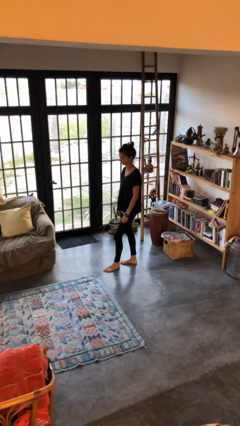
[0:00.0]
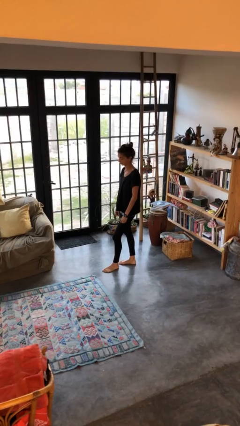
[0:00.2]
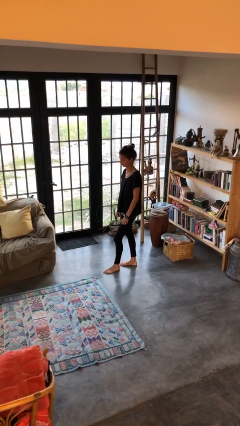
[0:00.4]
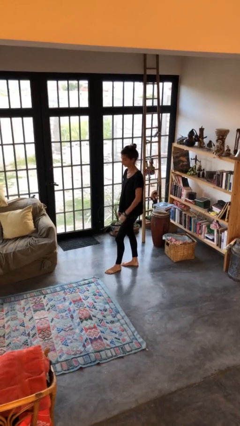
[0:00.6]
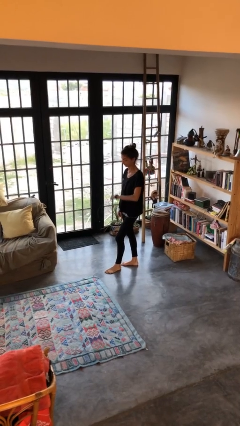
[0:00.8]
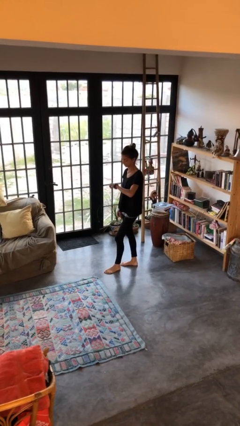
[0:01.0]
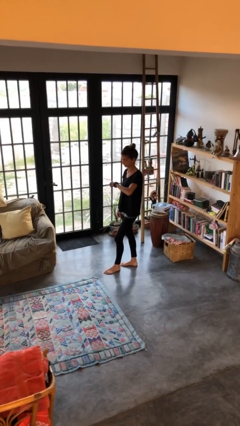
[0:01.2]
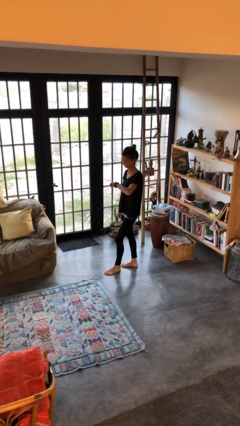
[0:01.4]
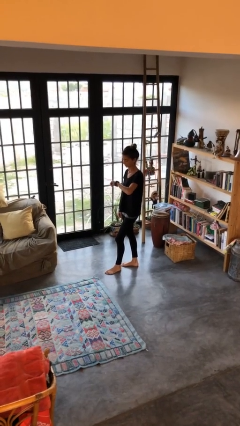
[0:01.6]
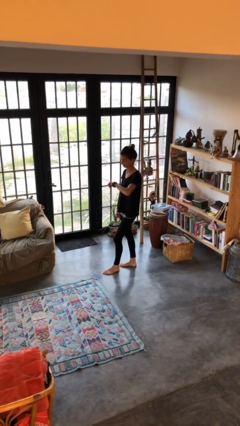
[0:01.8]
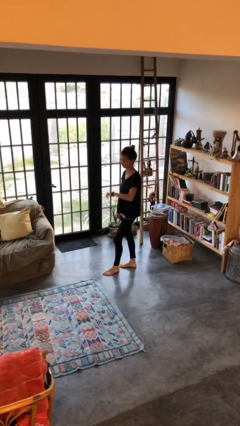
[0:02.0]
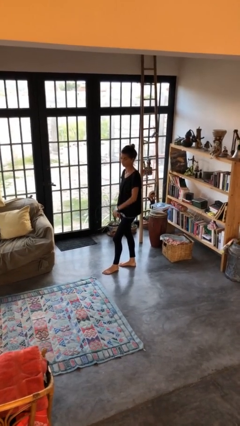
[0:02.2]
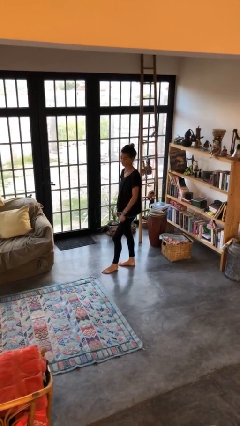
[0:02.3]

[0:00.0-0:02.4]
person looks at wristwatch

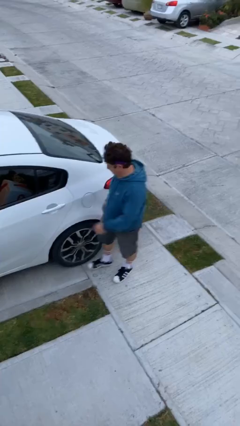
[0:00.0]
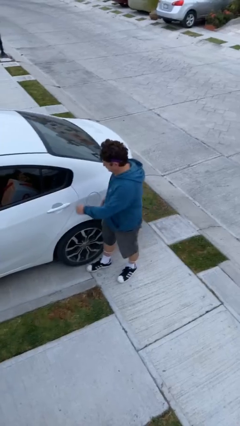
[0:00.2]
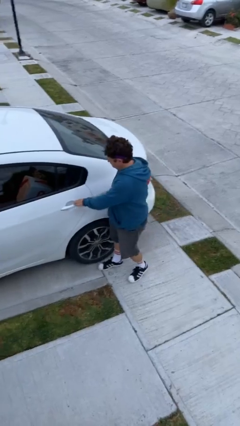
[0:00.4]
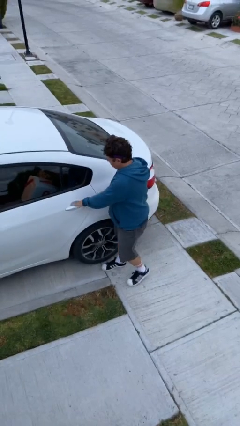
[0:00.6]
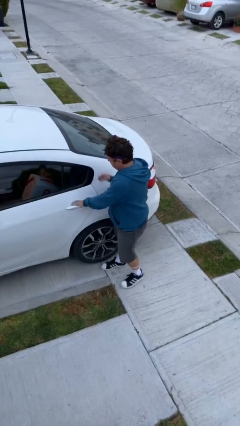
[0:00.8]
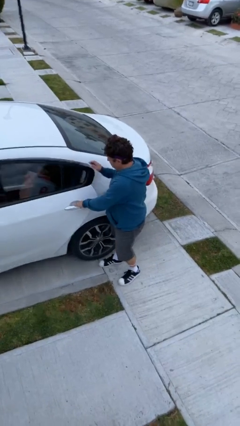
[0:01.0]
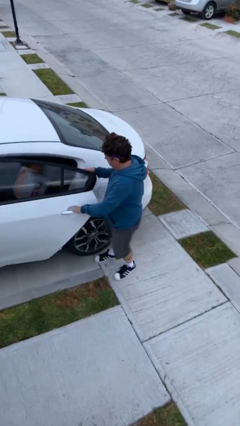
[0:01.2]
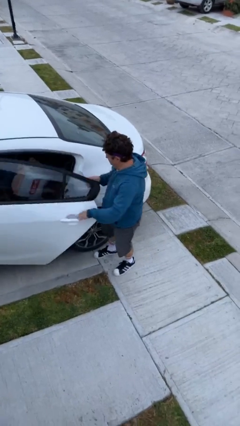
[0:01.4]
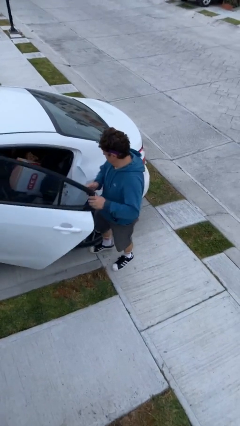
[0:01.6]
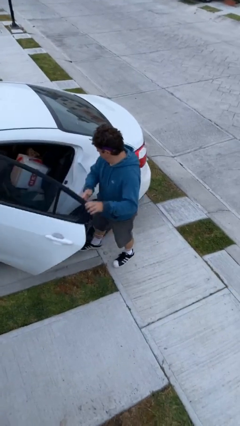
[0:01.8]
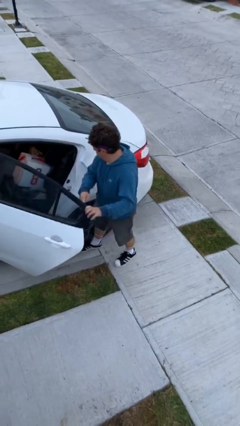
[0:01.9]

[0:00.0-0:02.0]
person opens car door

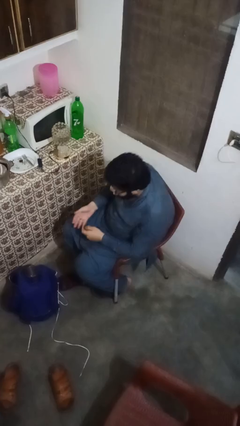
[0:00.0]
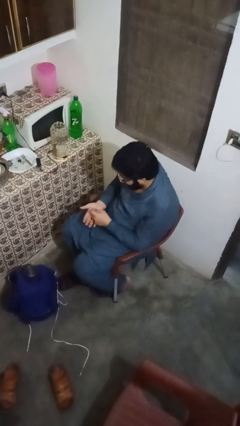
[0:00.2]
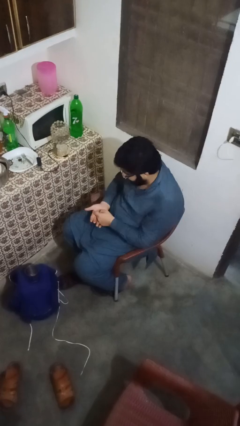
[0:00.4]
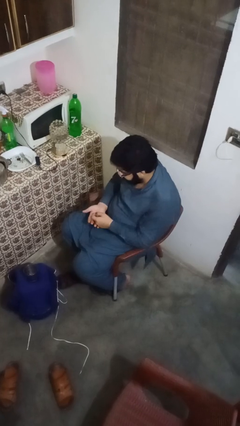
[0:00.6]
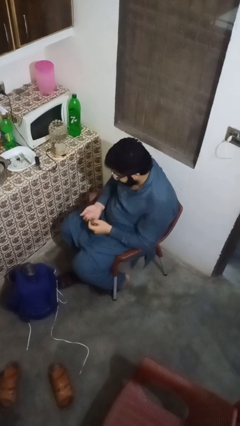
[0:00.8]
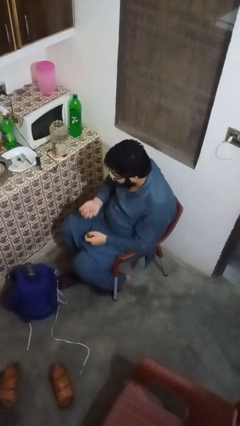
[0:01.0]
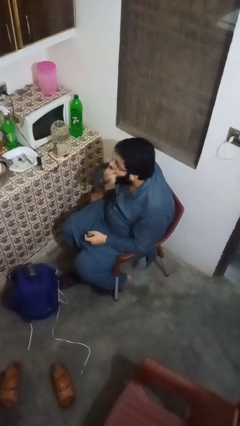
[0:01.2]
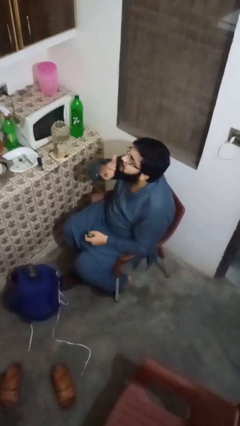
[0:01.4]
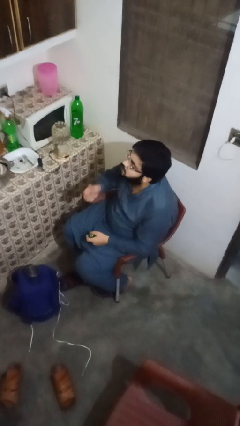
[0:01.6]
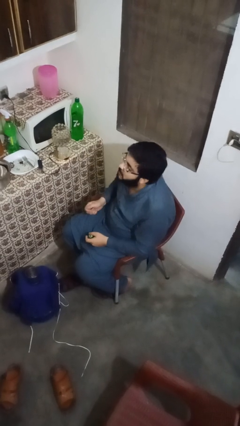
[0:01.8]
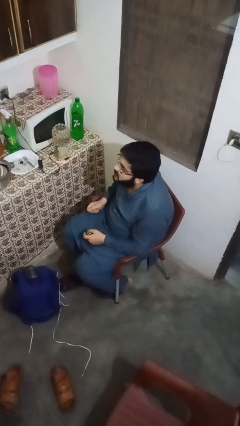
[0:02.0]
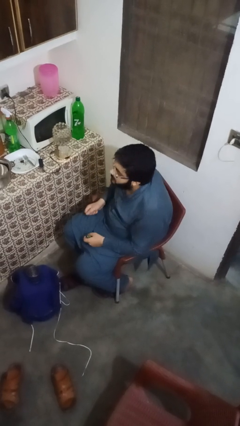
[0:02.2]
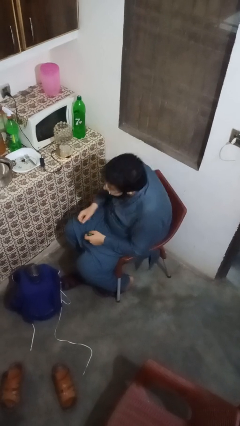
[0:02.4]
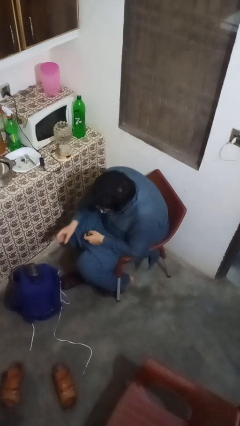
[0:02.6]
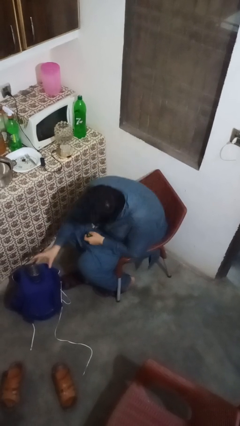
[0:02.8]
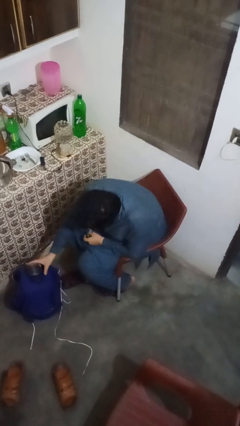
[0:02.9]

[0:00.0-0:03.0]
person takes medicine pills

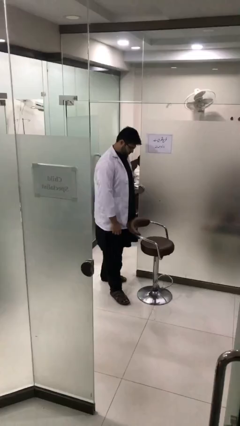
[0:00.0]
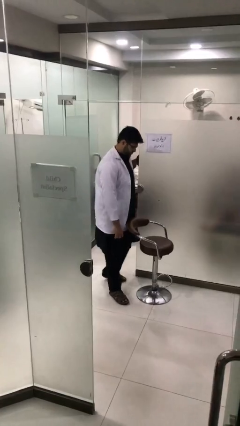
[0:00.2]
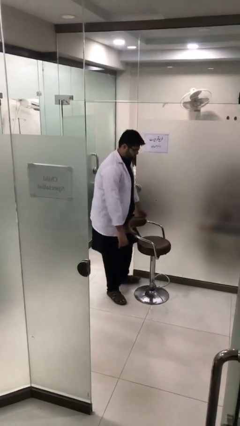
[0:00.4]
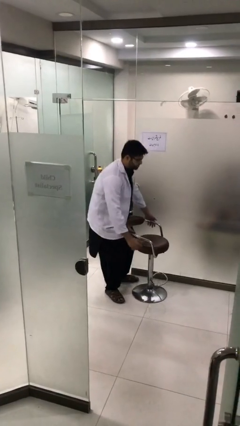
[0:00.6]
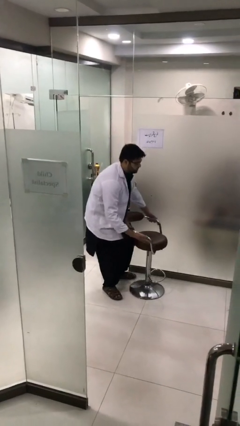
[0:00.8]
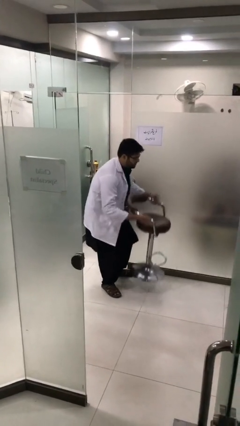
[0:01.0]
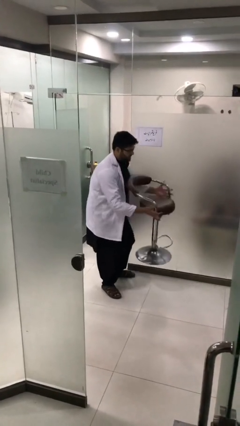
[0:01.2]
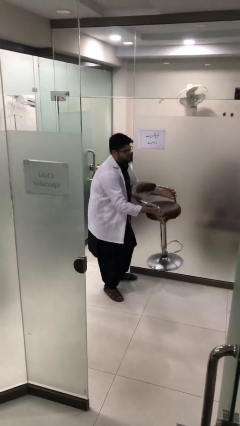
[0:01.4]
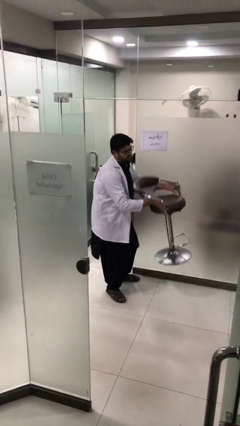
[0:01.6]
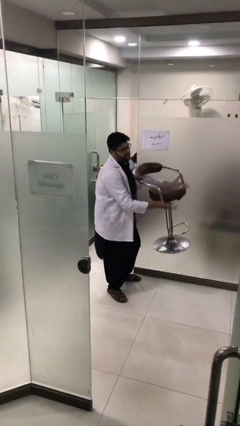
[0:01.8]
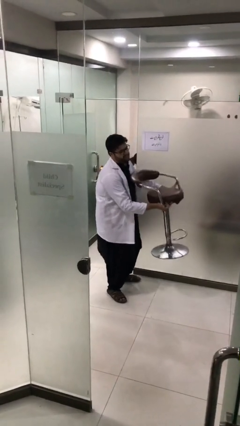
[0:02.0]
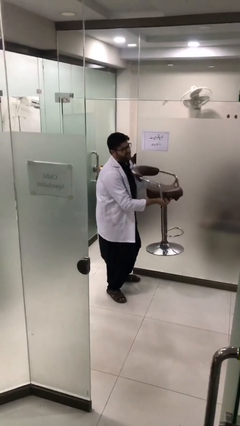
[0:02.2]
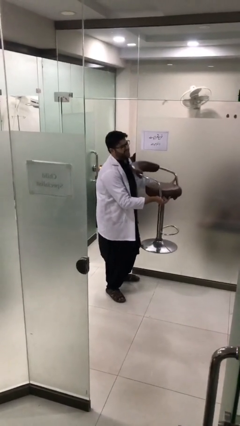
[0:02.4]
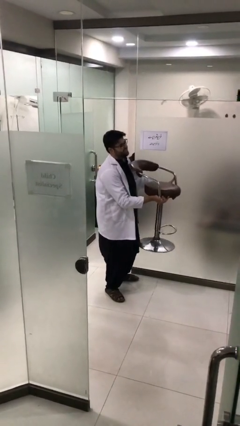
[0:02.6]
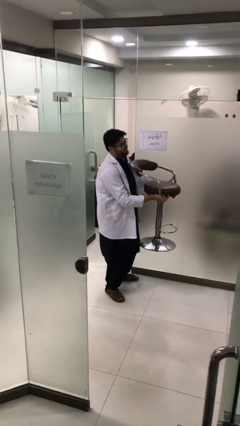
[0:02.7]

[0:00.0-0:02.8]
person picks up object from floor

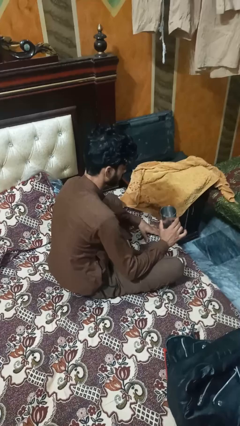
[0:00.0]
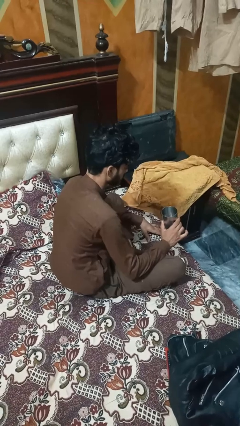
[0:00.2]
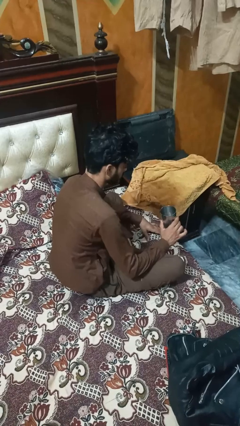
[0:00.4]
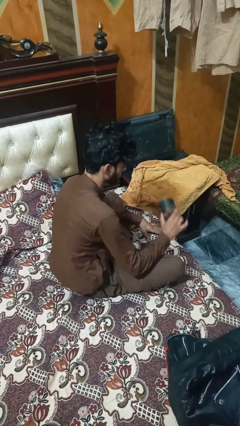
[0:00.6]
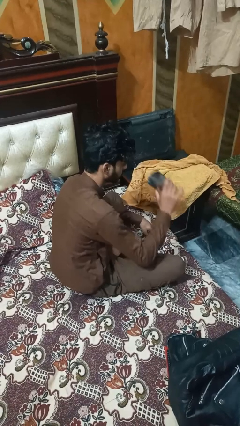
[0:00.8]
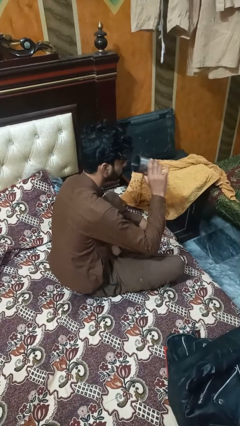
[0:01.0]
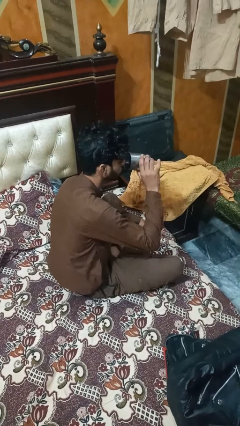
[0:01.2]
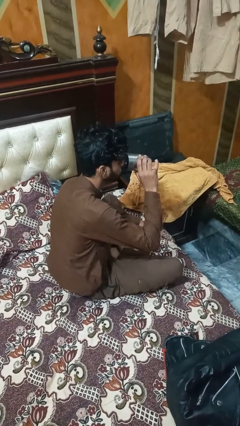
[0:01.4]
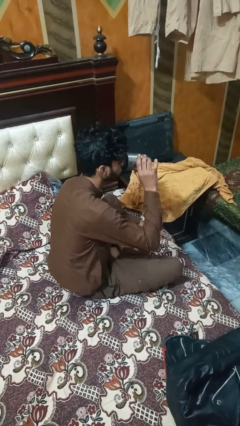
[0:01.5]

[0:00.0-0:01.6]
person drinks from mug

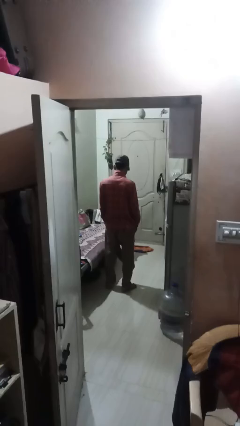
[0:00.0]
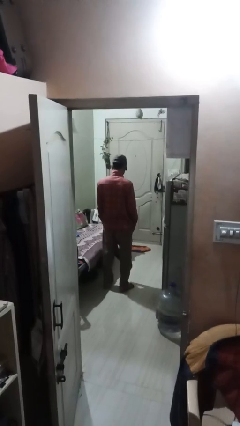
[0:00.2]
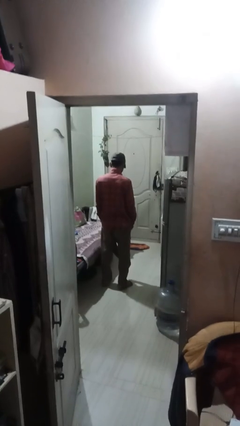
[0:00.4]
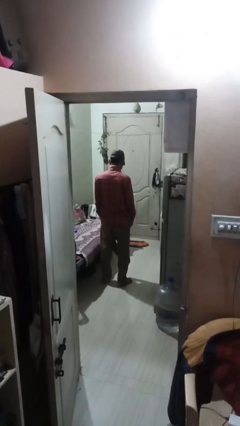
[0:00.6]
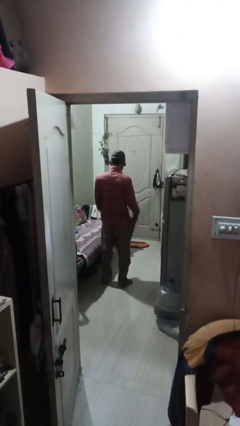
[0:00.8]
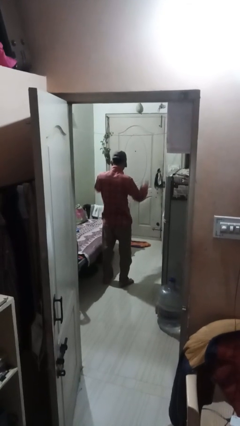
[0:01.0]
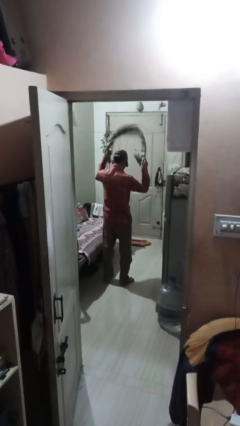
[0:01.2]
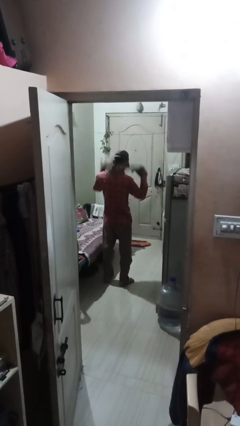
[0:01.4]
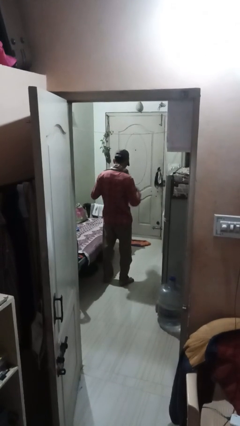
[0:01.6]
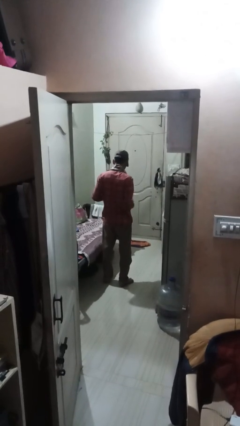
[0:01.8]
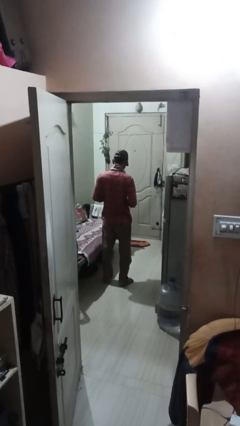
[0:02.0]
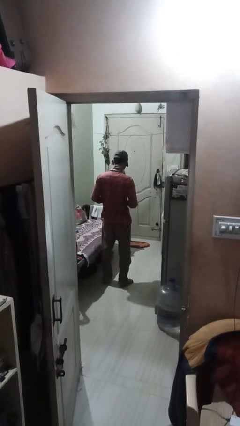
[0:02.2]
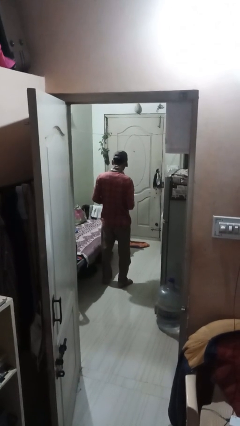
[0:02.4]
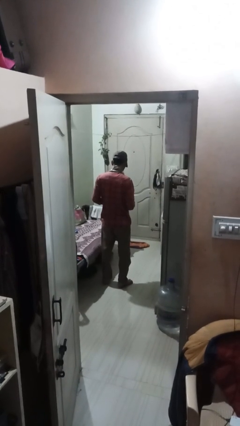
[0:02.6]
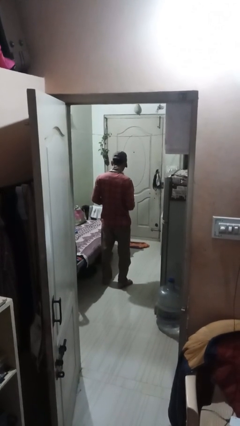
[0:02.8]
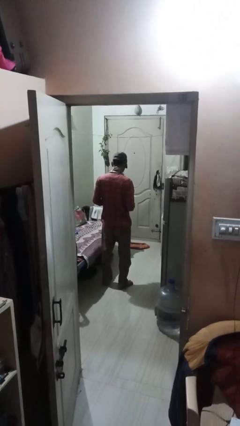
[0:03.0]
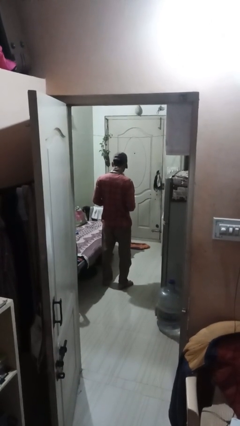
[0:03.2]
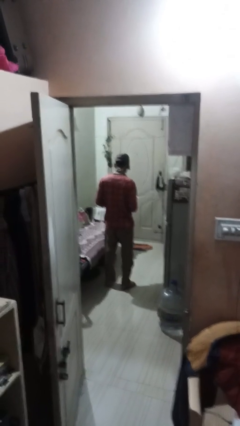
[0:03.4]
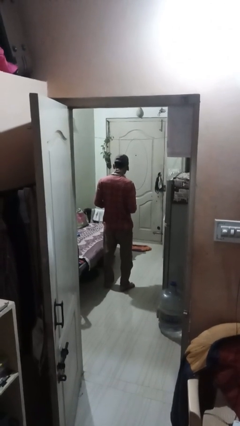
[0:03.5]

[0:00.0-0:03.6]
person puts on scarf

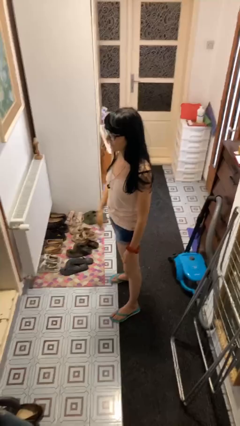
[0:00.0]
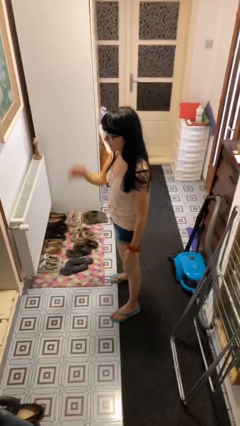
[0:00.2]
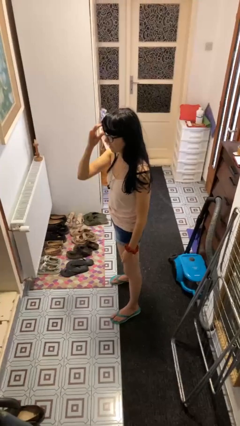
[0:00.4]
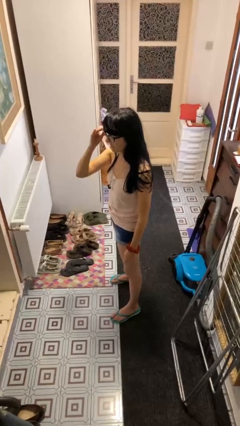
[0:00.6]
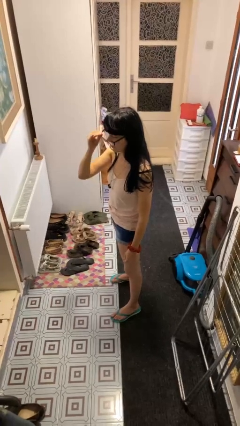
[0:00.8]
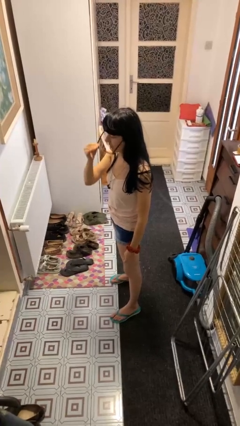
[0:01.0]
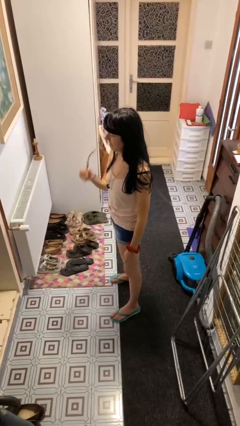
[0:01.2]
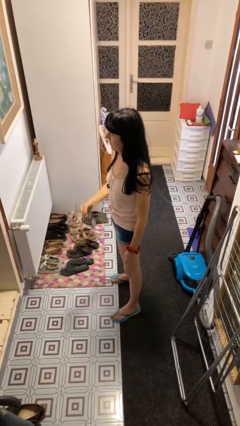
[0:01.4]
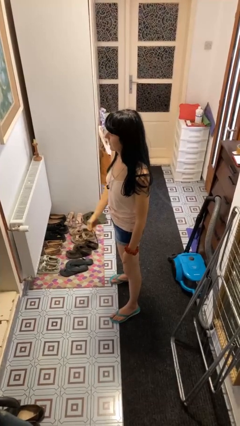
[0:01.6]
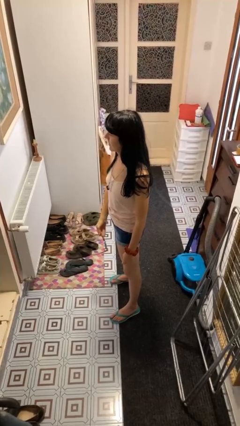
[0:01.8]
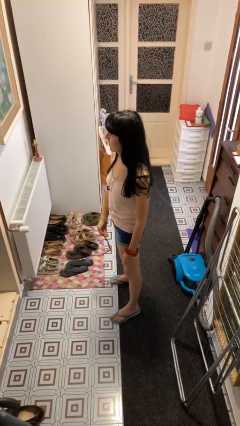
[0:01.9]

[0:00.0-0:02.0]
person takes off glasses
